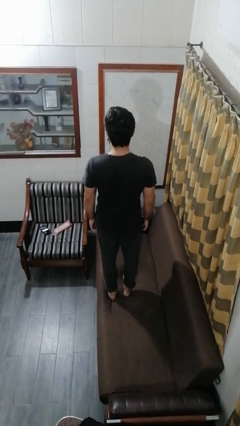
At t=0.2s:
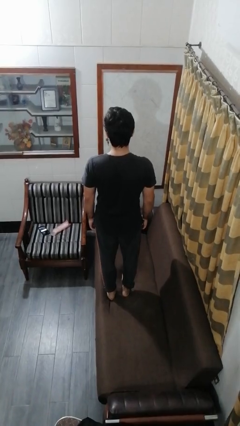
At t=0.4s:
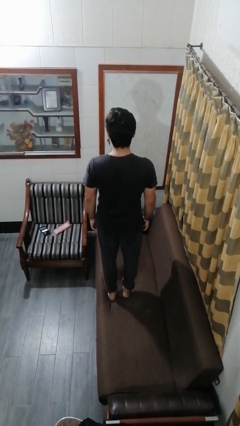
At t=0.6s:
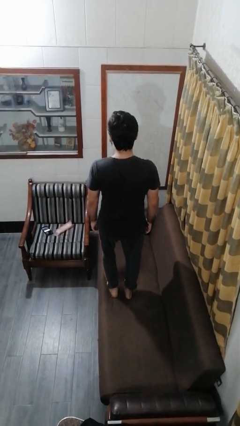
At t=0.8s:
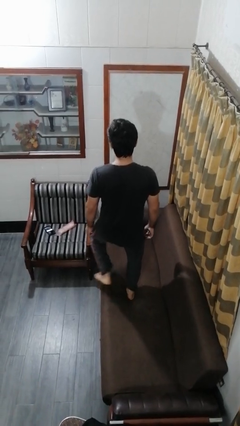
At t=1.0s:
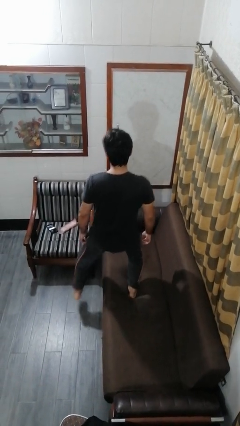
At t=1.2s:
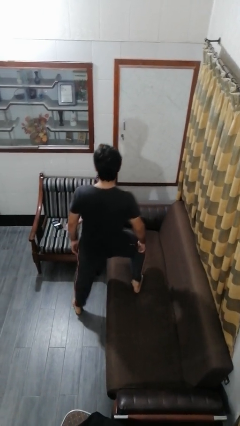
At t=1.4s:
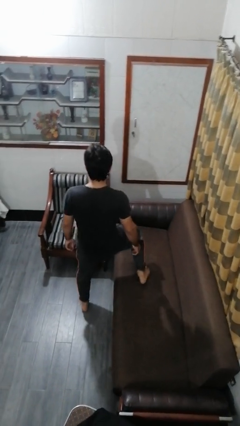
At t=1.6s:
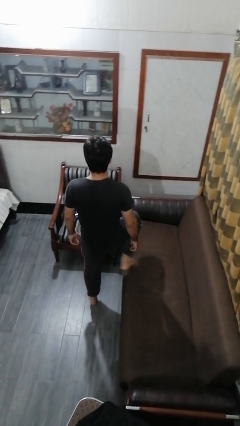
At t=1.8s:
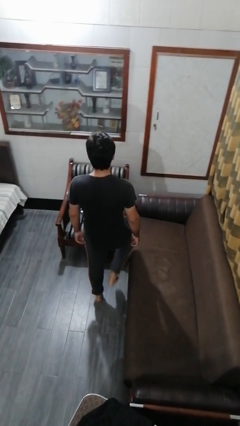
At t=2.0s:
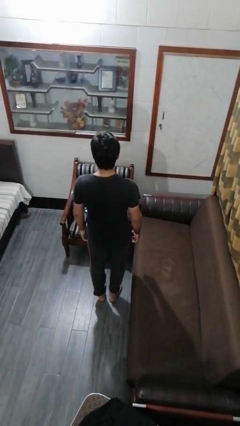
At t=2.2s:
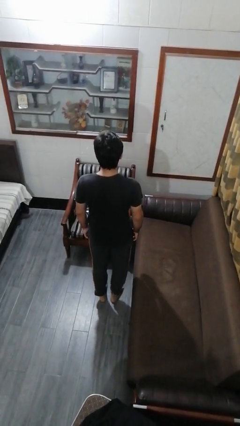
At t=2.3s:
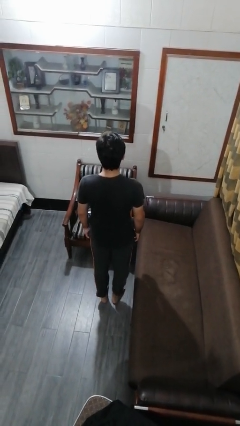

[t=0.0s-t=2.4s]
person climbs off couch

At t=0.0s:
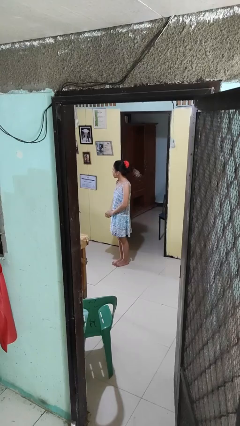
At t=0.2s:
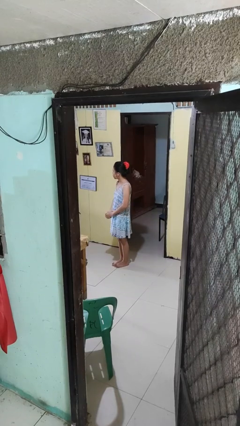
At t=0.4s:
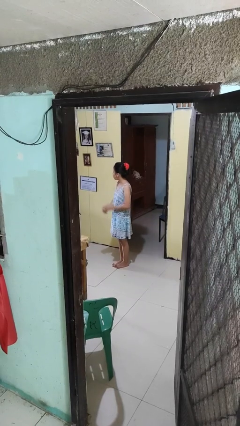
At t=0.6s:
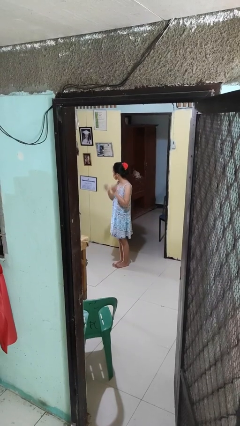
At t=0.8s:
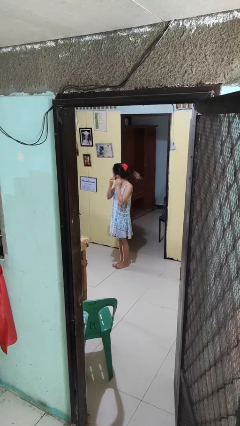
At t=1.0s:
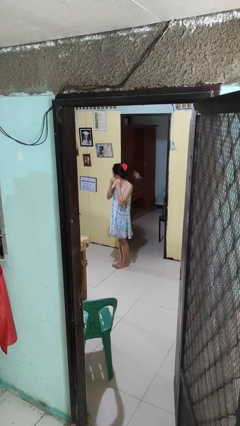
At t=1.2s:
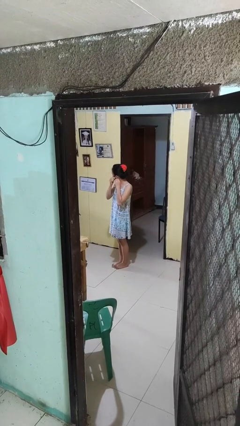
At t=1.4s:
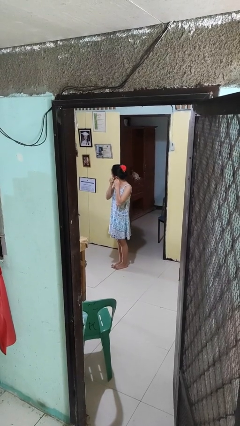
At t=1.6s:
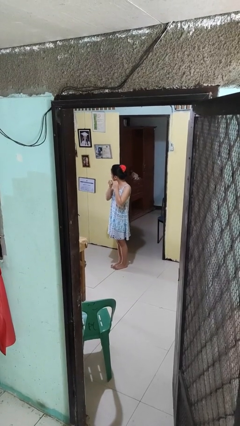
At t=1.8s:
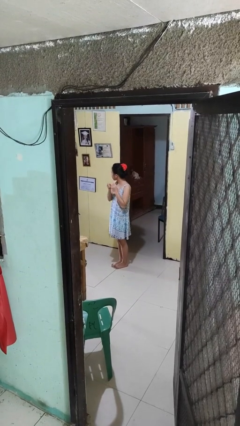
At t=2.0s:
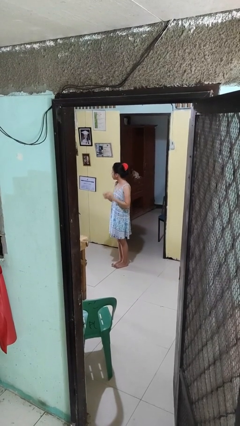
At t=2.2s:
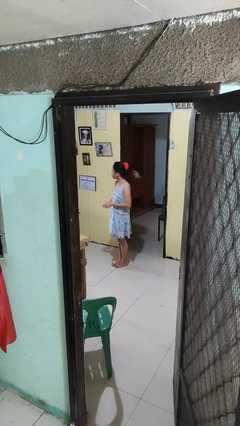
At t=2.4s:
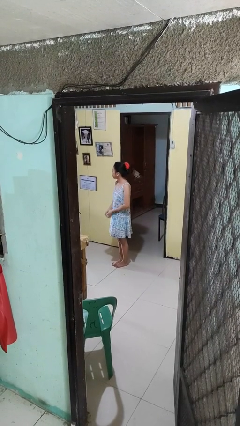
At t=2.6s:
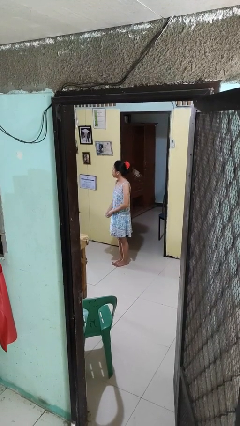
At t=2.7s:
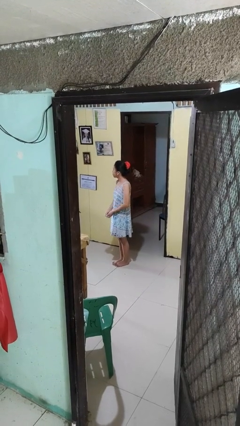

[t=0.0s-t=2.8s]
person takes off earrings

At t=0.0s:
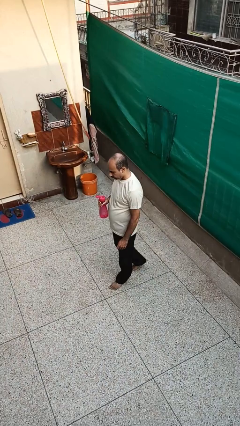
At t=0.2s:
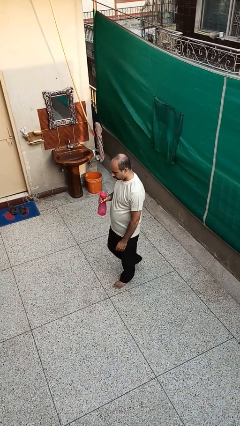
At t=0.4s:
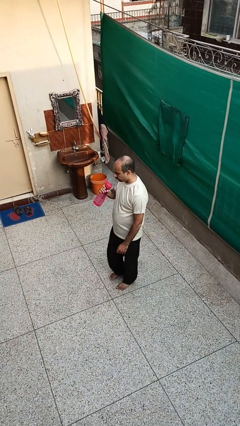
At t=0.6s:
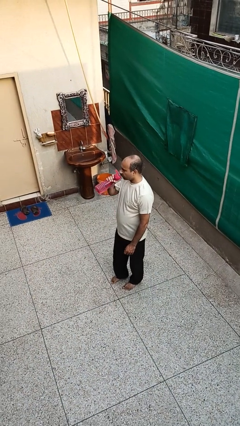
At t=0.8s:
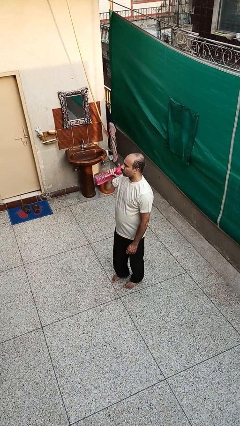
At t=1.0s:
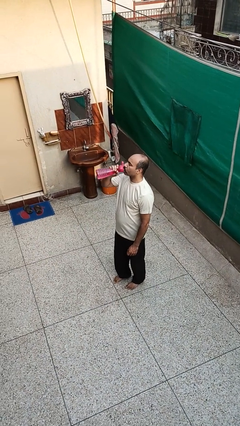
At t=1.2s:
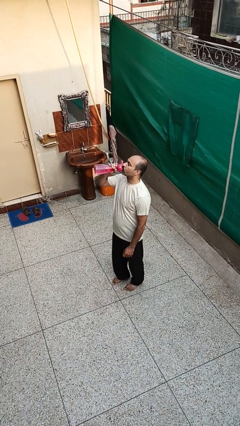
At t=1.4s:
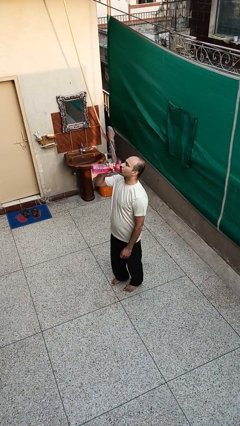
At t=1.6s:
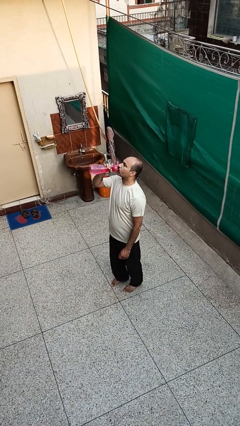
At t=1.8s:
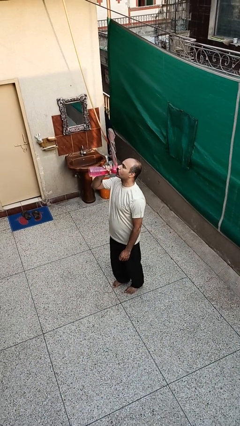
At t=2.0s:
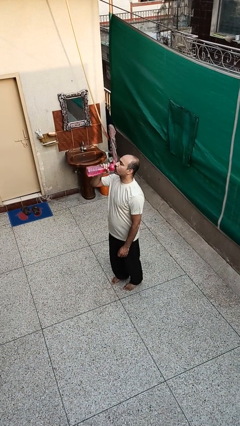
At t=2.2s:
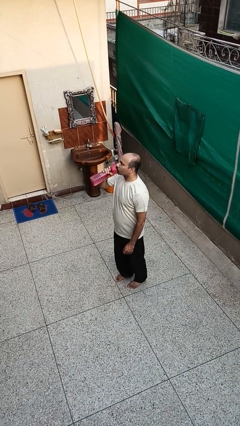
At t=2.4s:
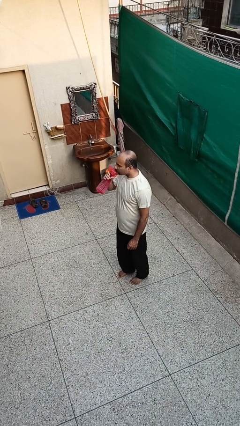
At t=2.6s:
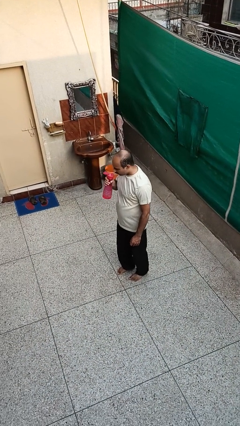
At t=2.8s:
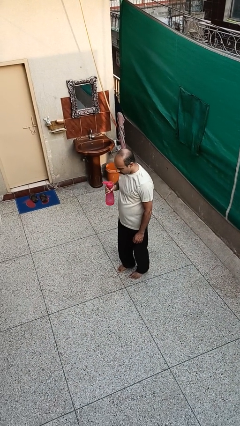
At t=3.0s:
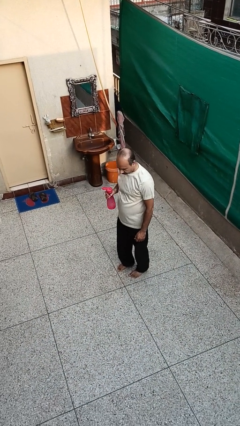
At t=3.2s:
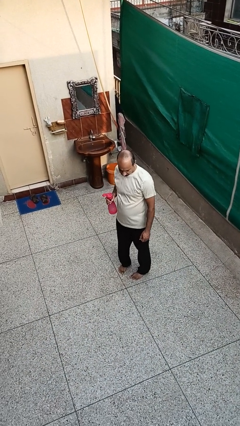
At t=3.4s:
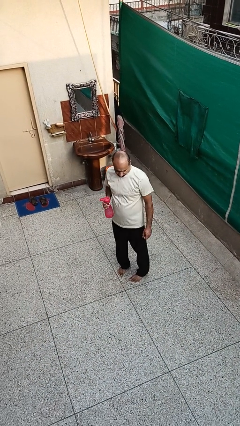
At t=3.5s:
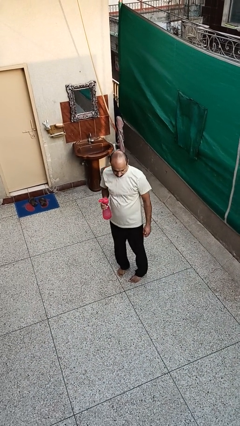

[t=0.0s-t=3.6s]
person drinks from bottle

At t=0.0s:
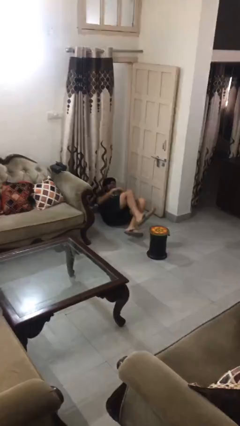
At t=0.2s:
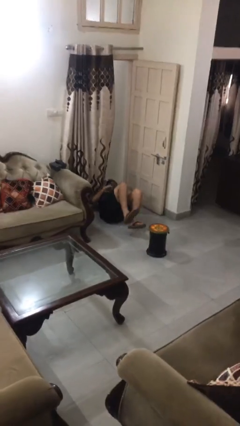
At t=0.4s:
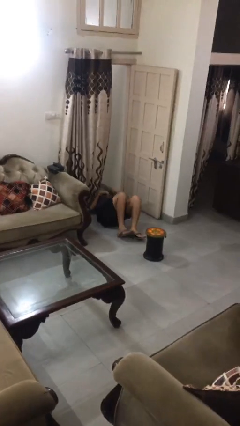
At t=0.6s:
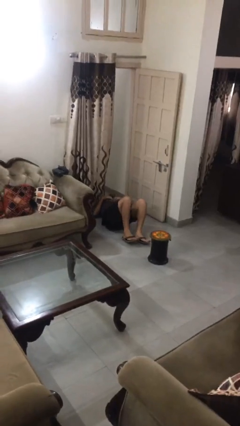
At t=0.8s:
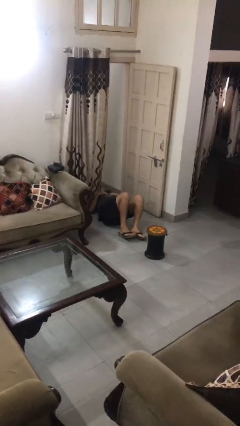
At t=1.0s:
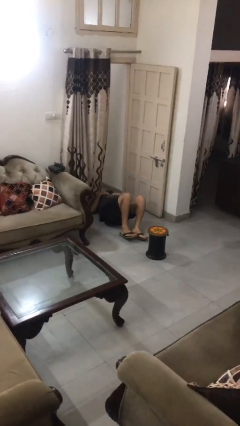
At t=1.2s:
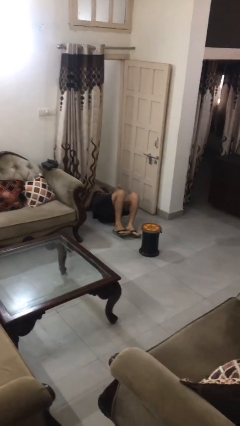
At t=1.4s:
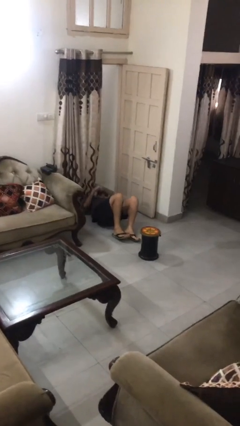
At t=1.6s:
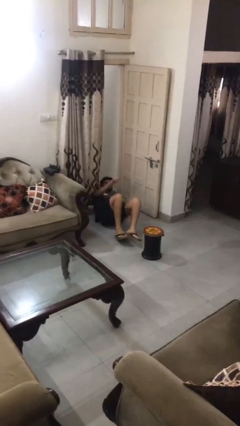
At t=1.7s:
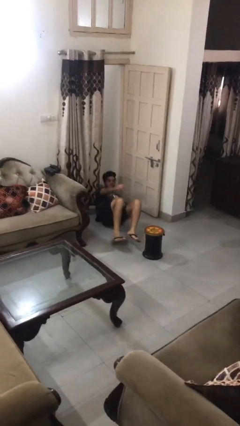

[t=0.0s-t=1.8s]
person lies down on floor

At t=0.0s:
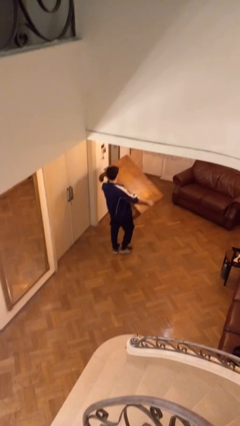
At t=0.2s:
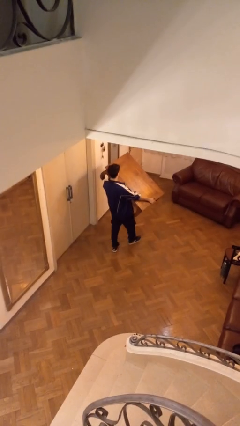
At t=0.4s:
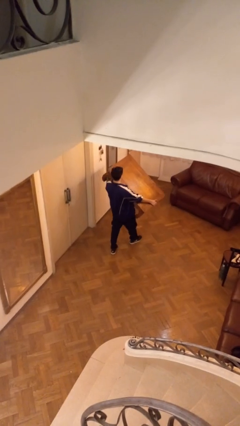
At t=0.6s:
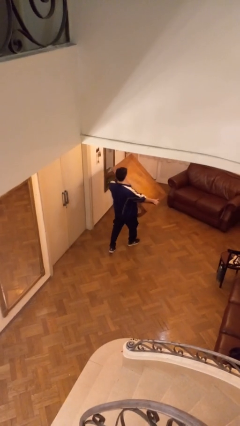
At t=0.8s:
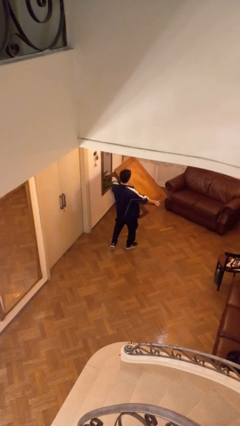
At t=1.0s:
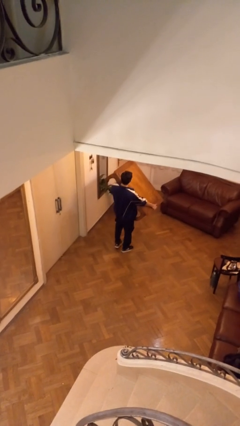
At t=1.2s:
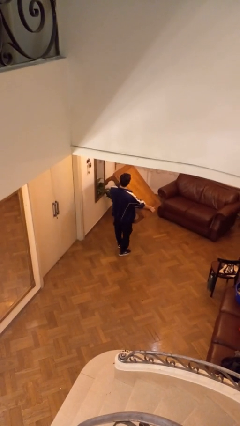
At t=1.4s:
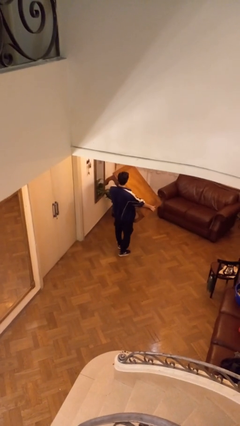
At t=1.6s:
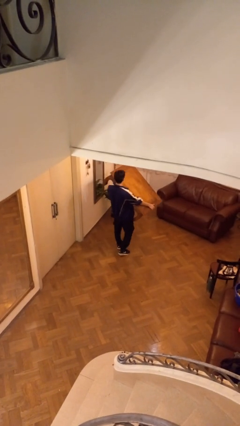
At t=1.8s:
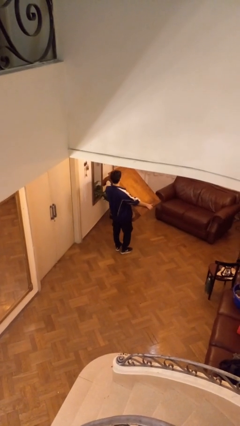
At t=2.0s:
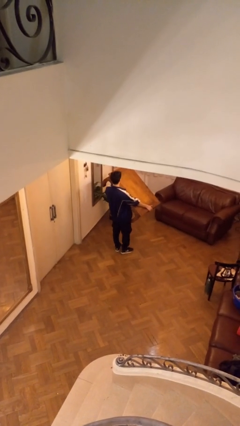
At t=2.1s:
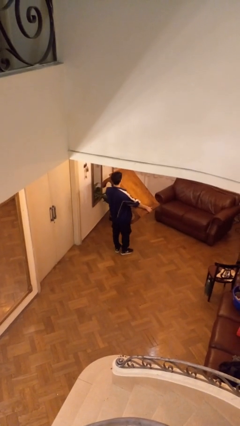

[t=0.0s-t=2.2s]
person carries furniture

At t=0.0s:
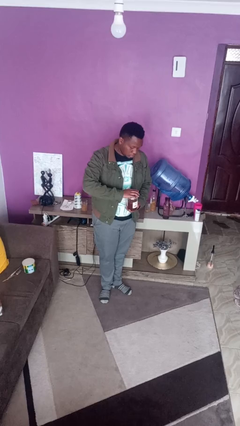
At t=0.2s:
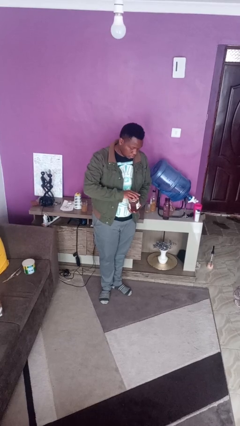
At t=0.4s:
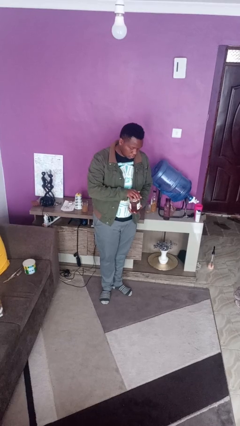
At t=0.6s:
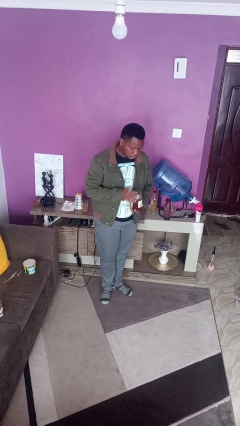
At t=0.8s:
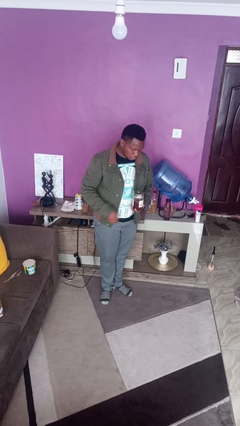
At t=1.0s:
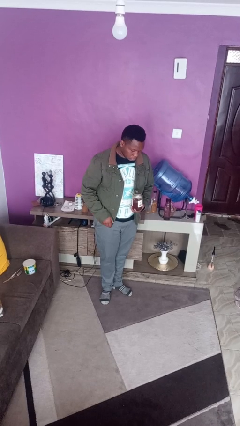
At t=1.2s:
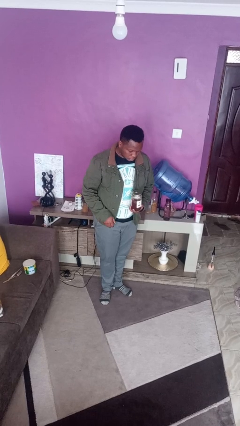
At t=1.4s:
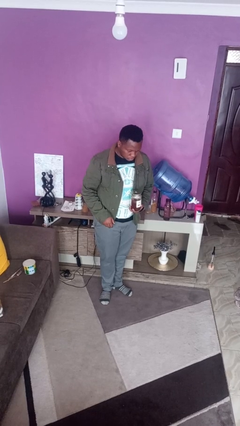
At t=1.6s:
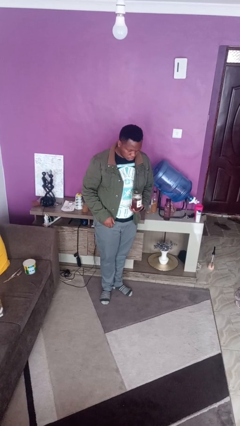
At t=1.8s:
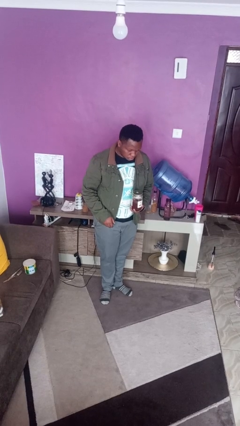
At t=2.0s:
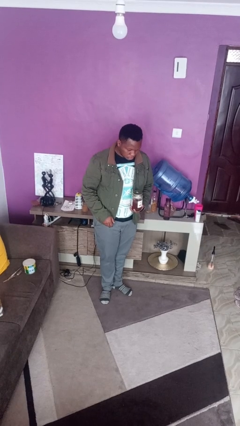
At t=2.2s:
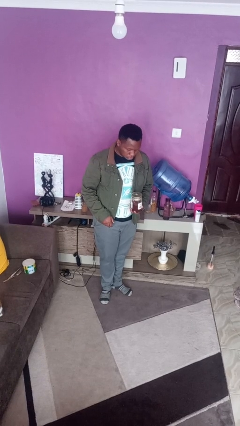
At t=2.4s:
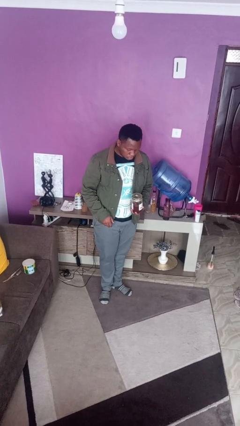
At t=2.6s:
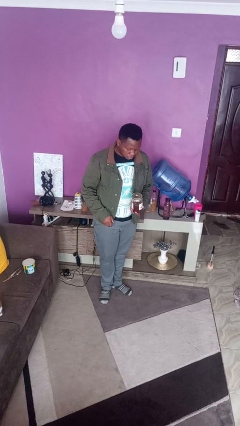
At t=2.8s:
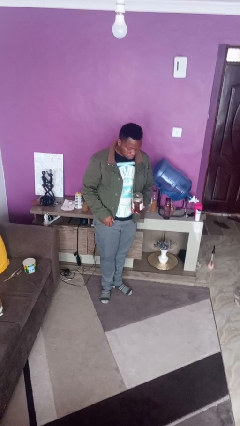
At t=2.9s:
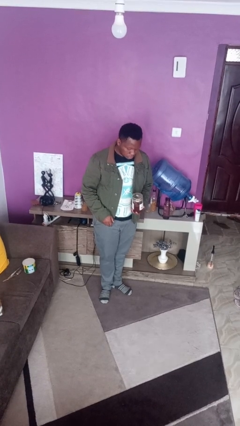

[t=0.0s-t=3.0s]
person closes jar

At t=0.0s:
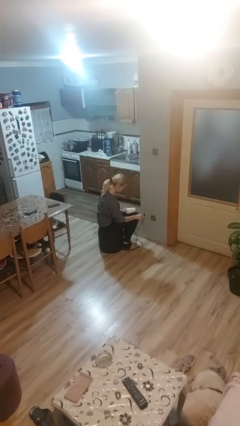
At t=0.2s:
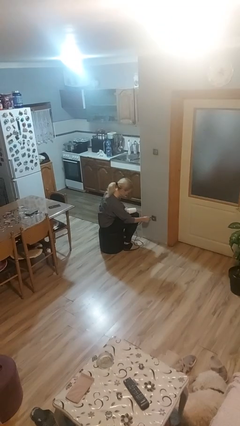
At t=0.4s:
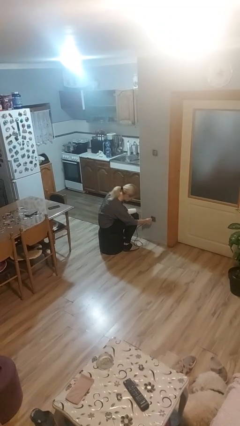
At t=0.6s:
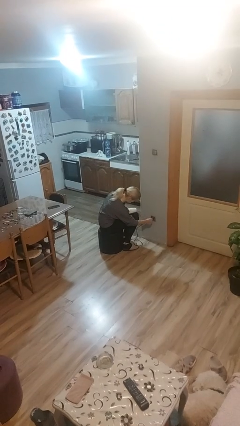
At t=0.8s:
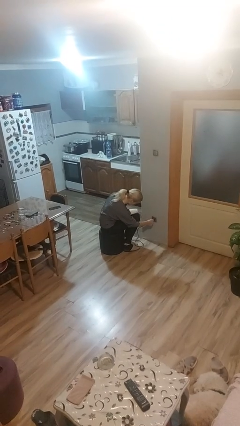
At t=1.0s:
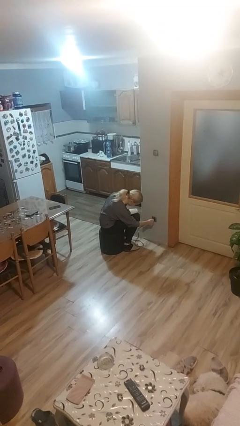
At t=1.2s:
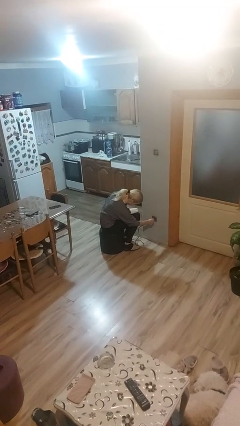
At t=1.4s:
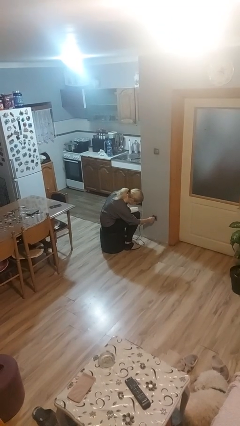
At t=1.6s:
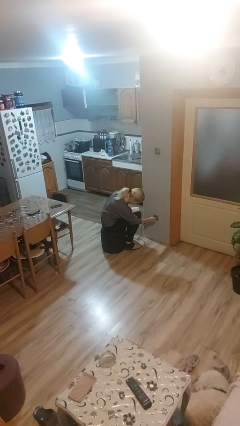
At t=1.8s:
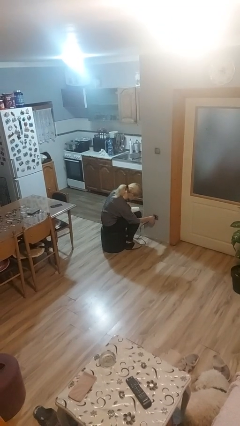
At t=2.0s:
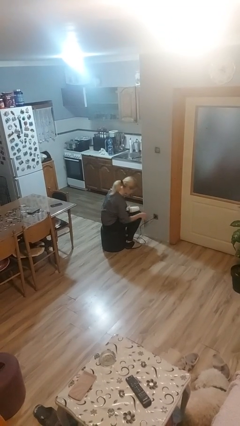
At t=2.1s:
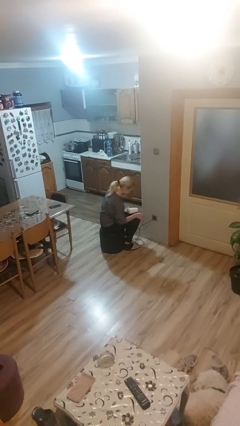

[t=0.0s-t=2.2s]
person plugs into electrical socket
